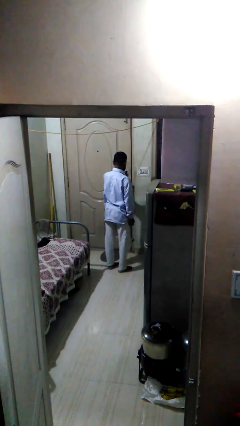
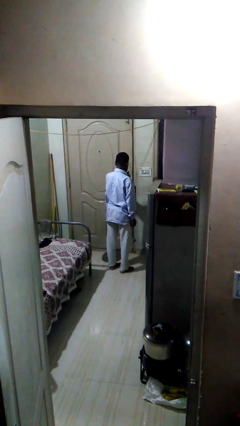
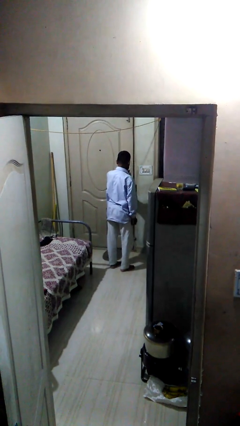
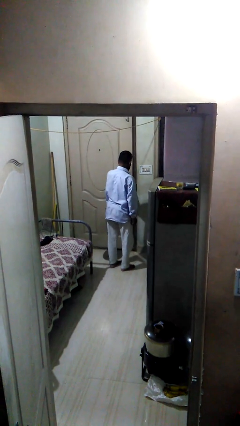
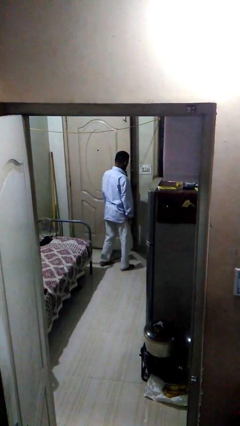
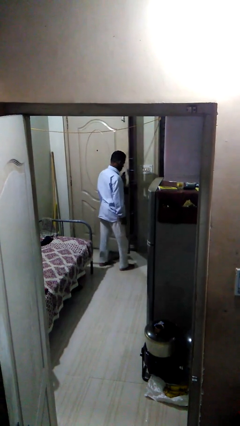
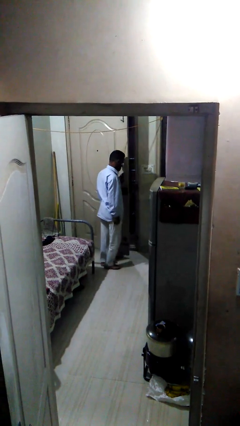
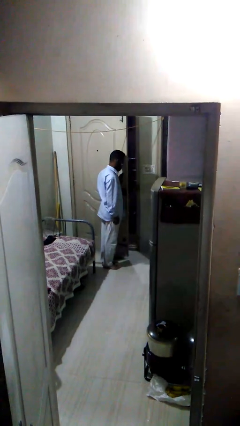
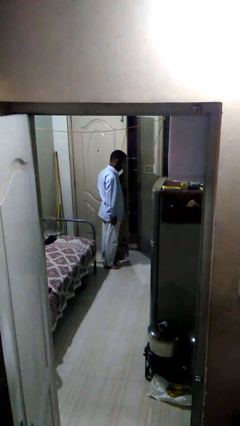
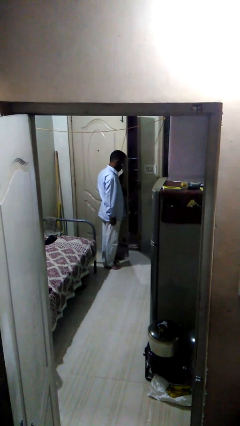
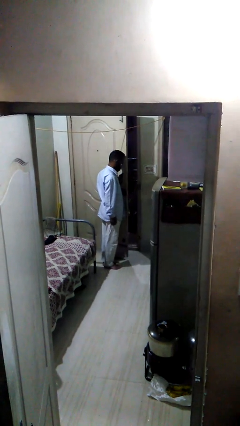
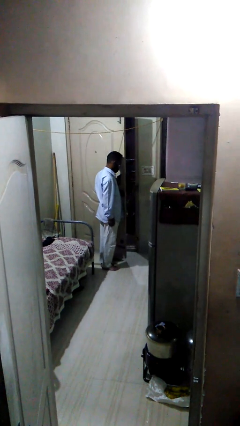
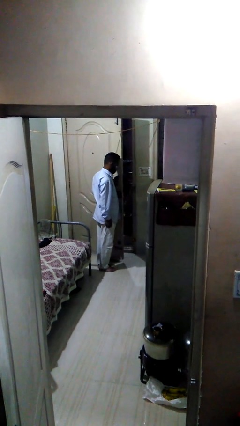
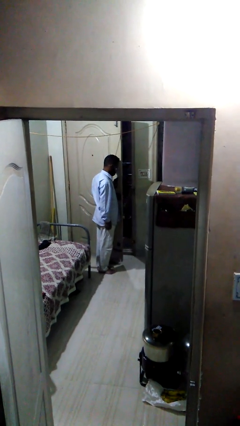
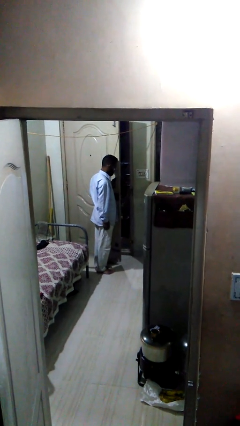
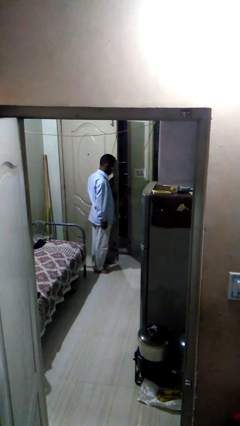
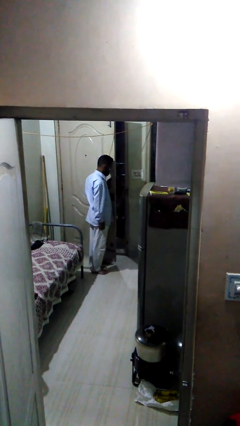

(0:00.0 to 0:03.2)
person opens facility door

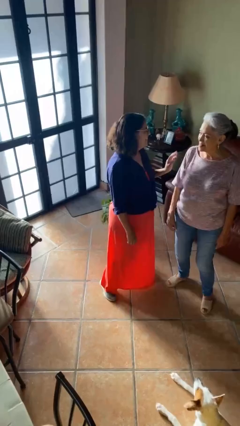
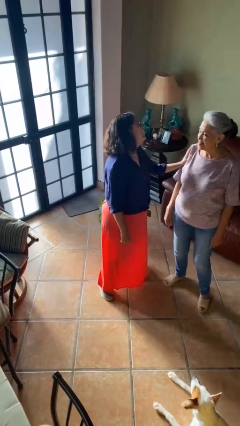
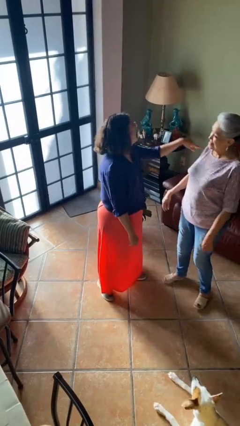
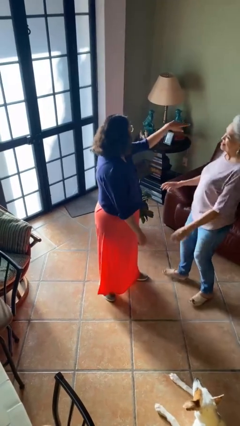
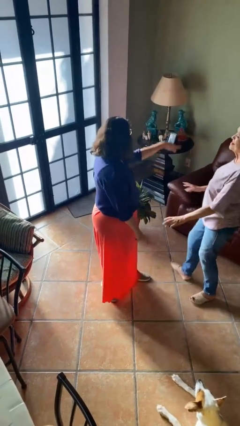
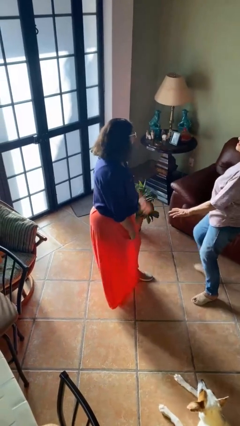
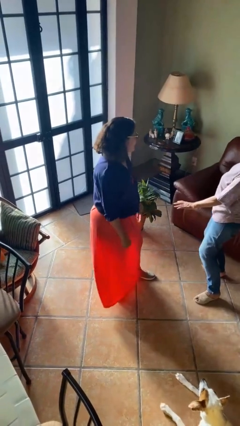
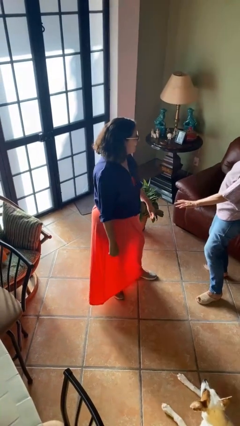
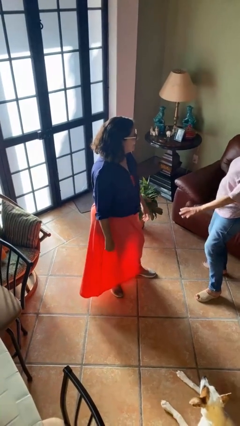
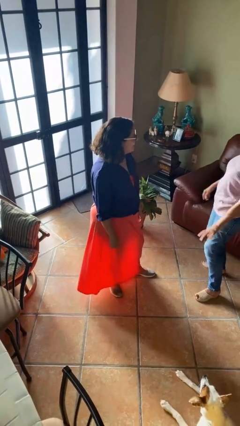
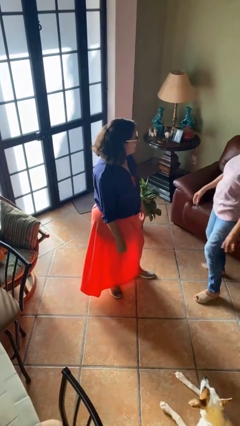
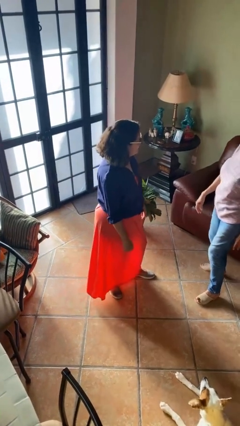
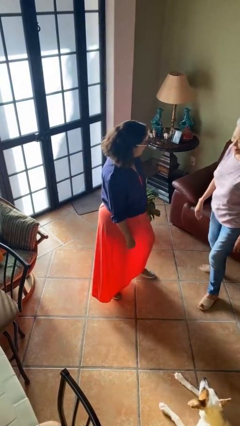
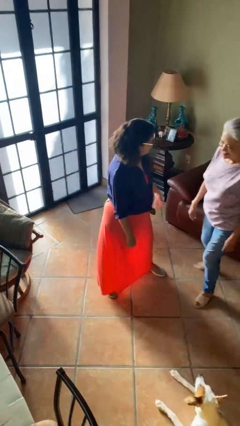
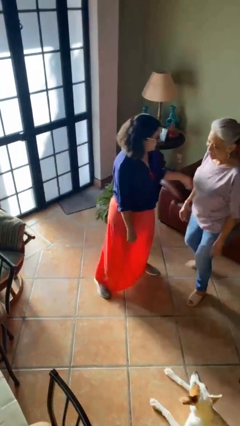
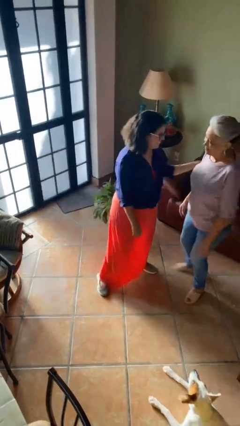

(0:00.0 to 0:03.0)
person shoves person

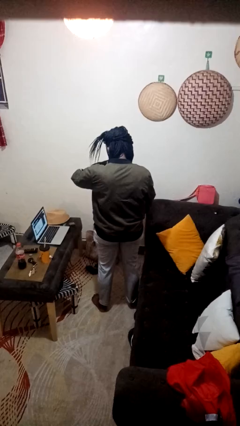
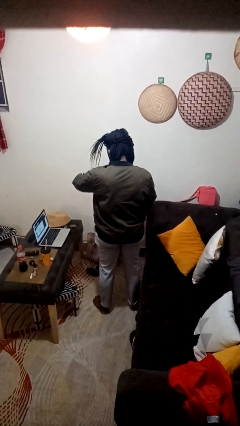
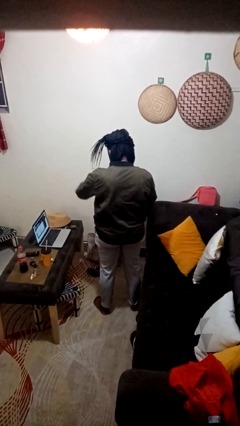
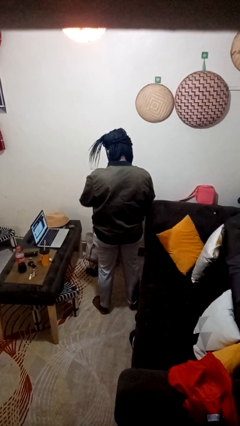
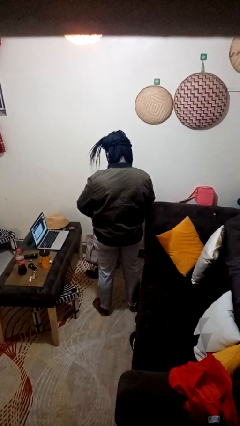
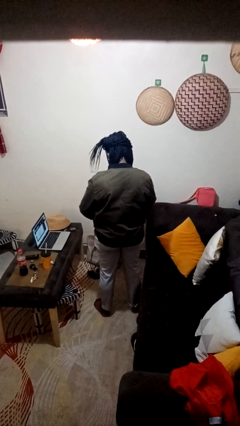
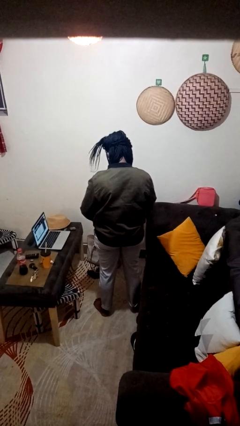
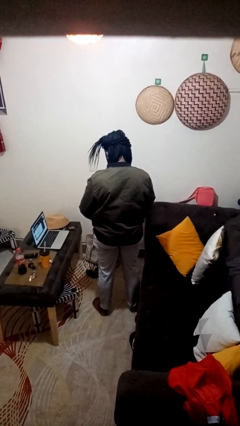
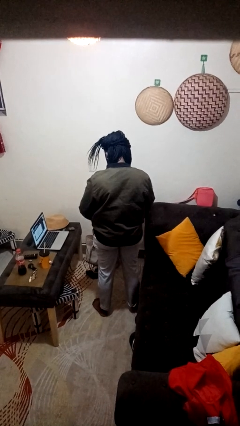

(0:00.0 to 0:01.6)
person unzips jacket

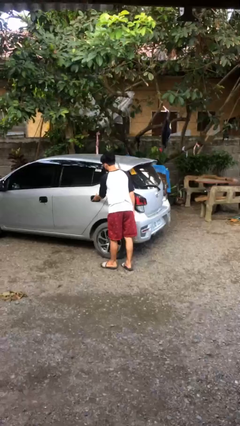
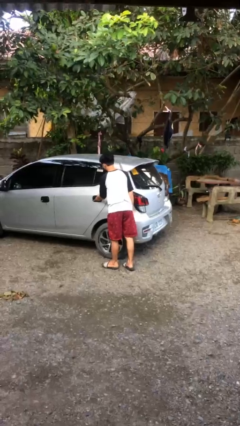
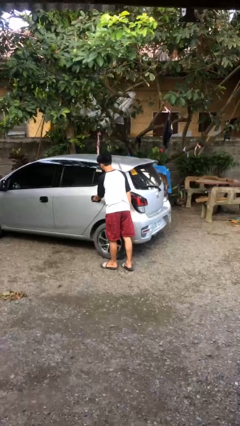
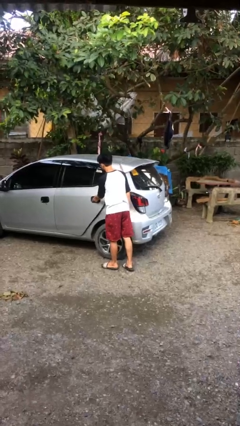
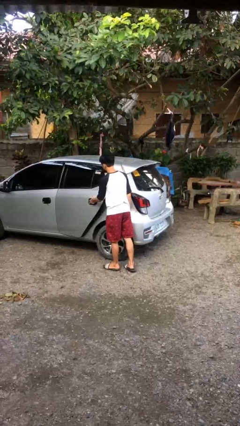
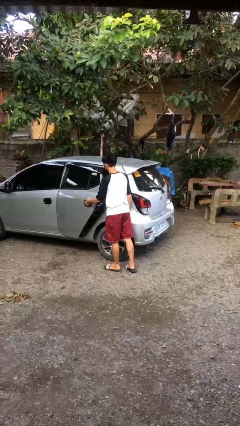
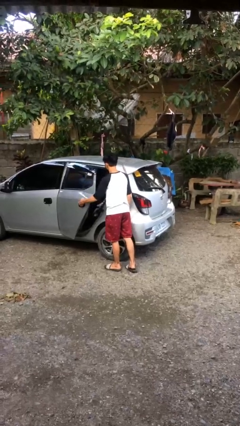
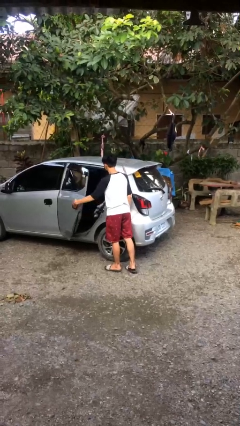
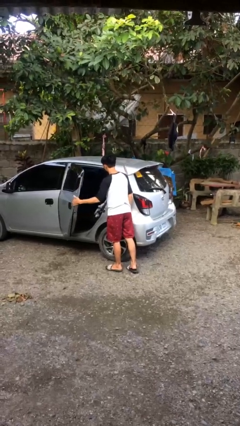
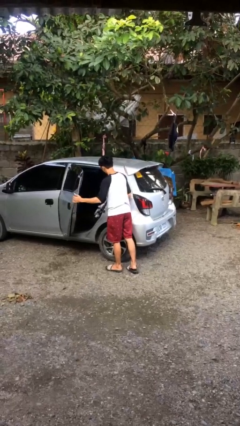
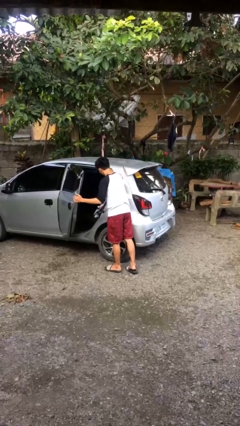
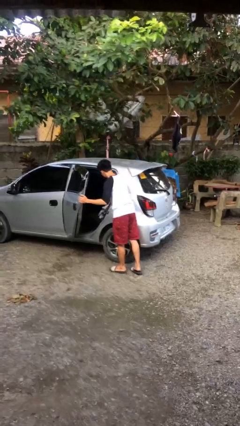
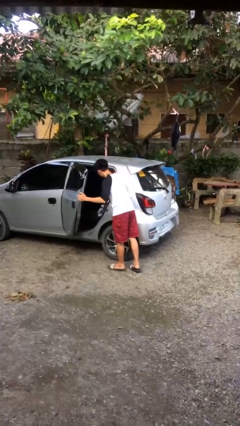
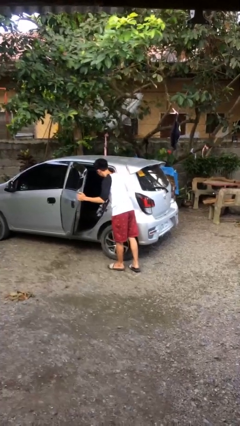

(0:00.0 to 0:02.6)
person opens car door

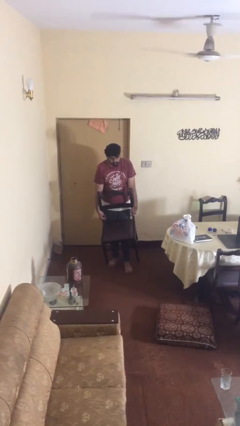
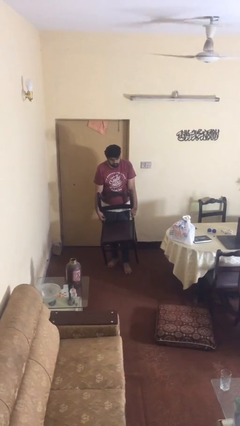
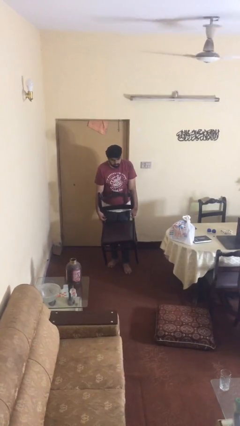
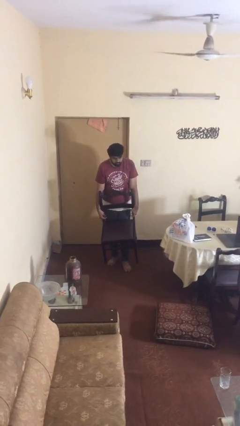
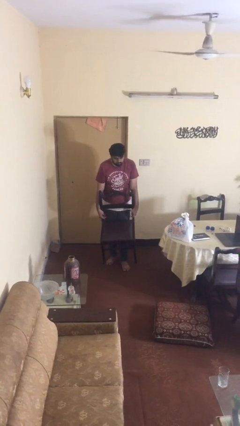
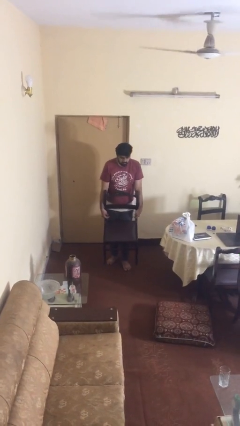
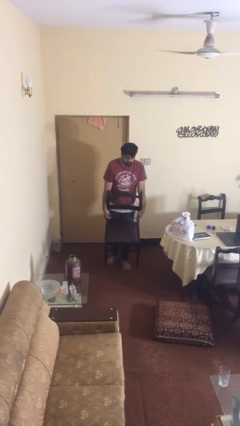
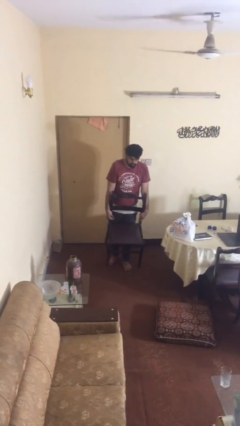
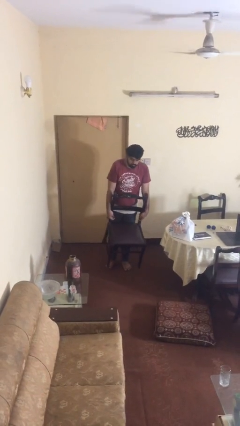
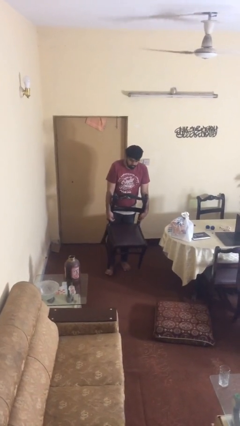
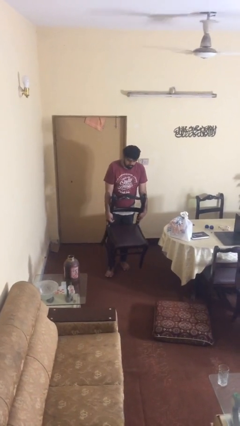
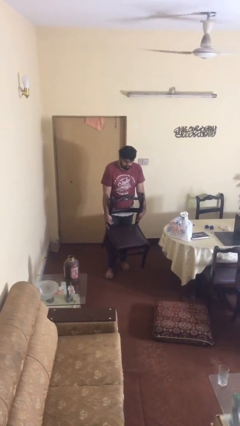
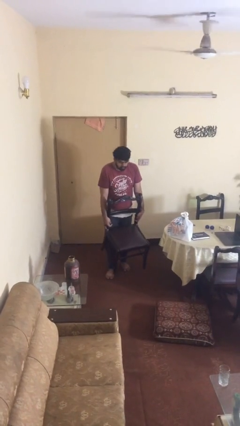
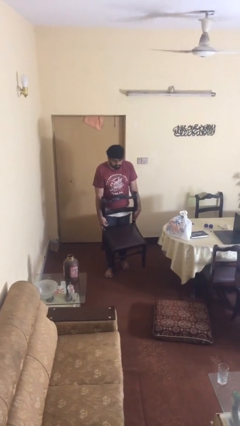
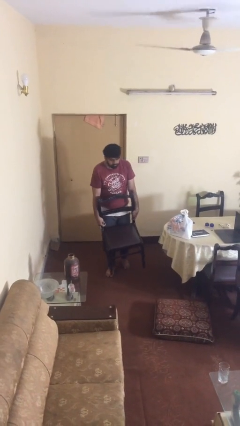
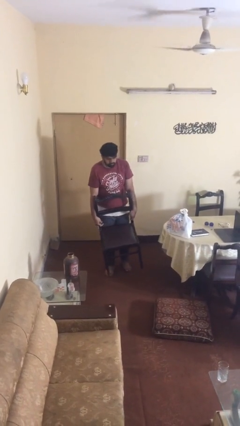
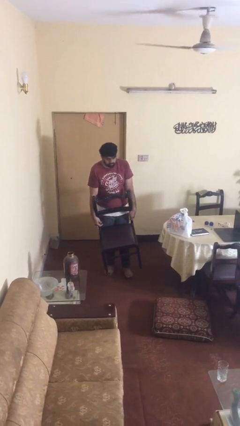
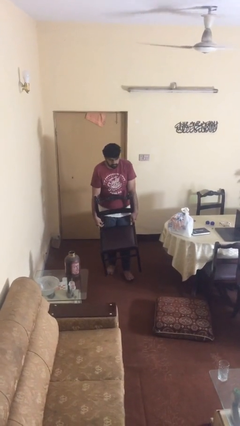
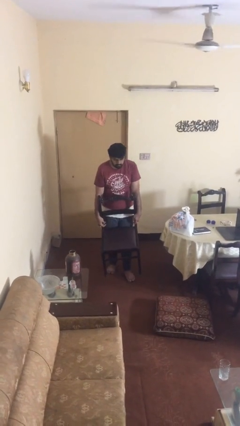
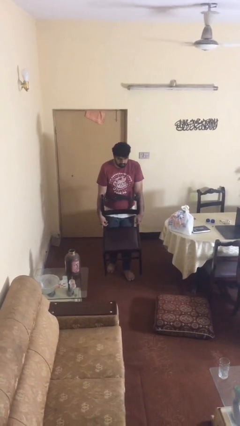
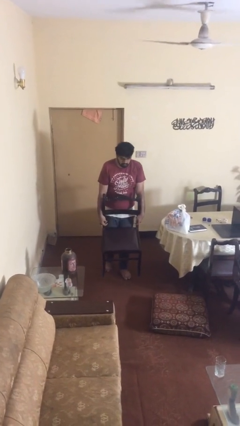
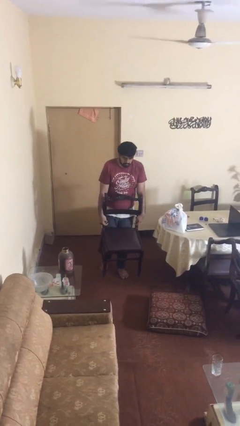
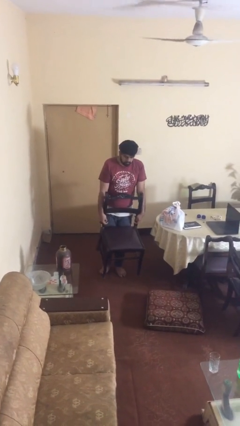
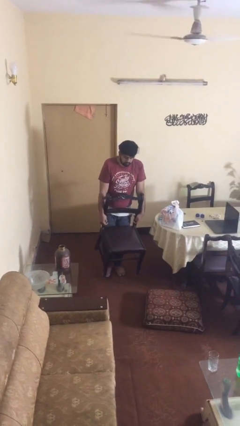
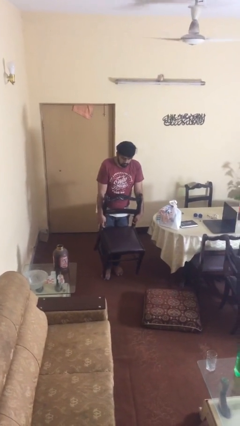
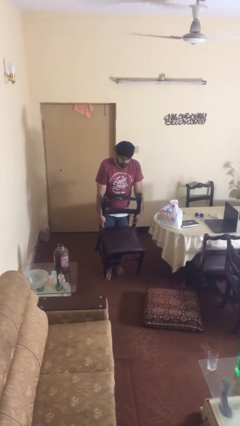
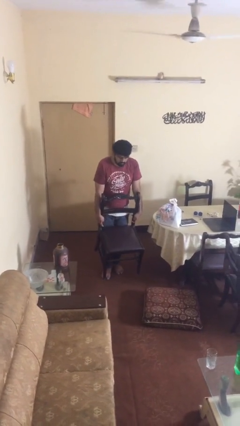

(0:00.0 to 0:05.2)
person carries heavy object

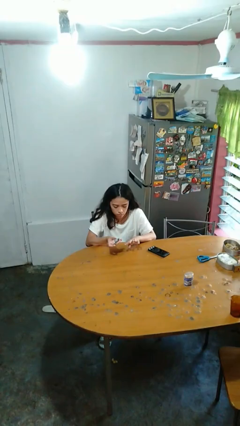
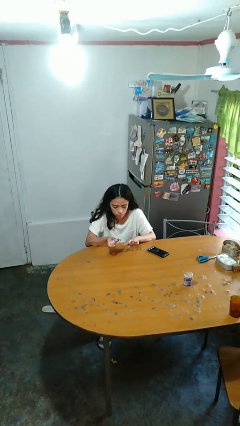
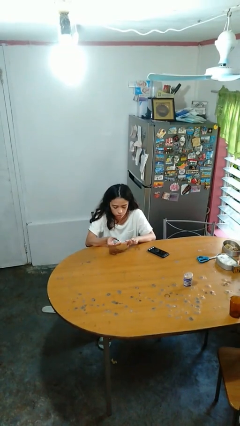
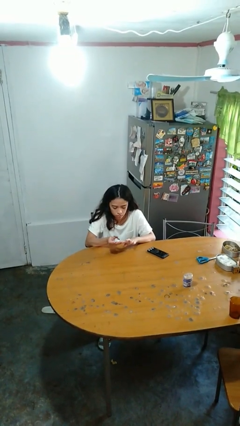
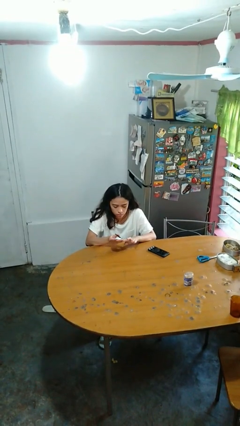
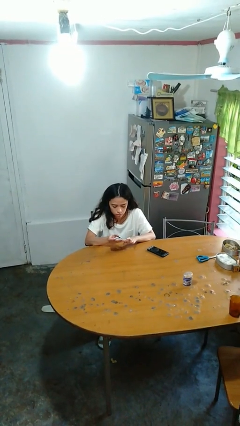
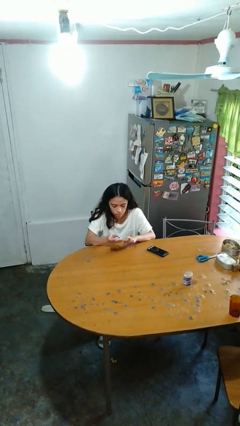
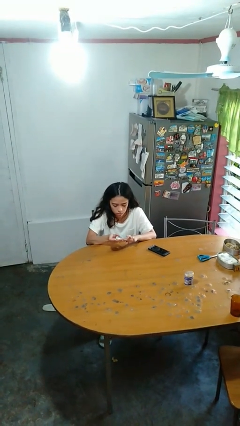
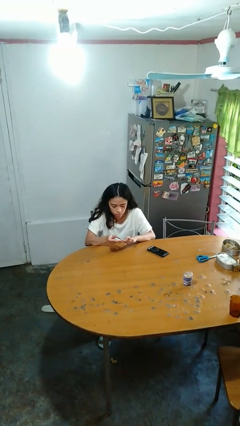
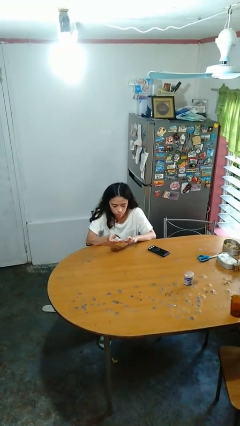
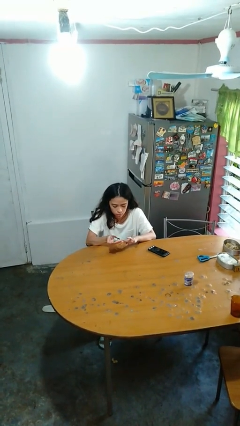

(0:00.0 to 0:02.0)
person clips fingernails
